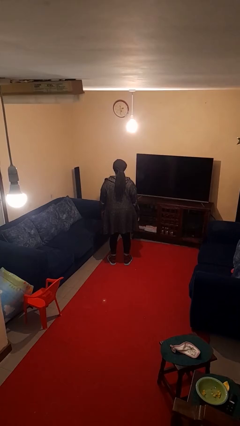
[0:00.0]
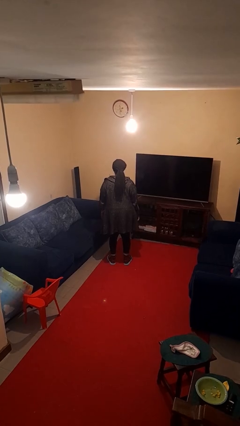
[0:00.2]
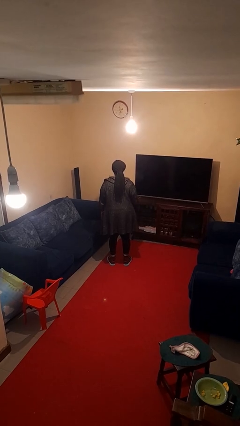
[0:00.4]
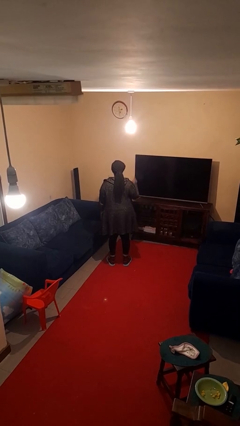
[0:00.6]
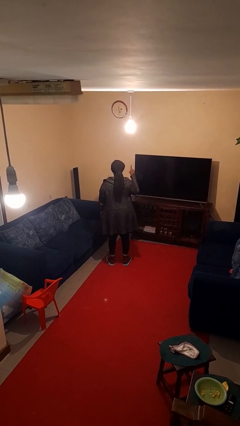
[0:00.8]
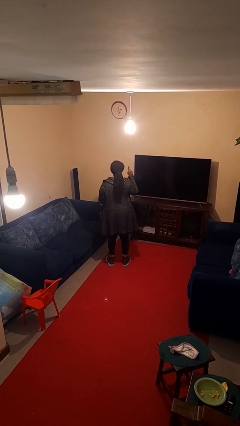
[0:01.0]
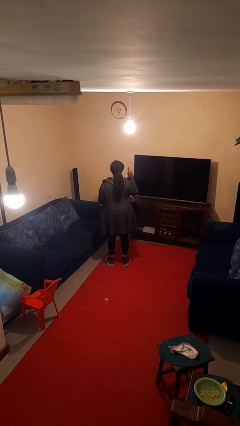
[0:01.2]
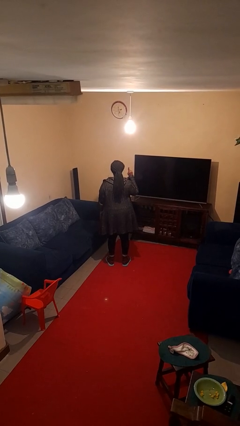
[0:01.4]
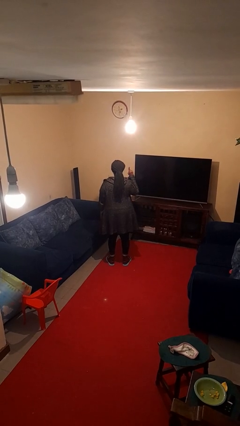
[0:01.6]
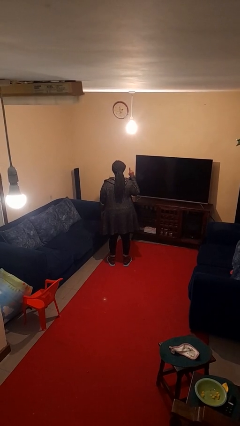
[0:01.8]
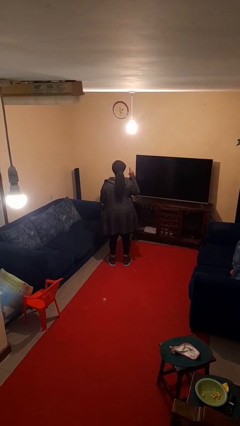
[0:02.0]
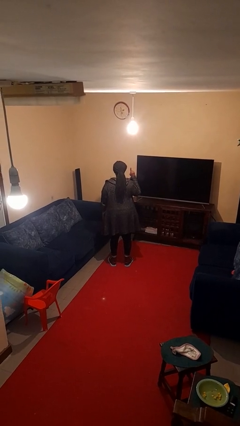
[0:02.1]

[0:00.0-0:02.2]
person gestures number one

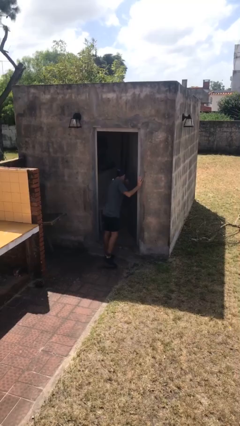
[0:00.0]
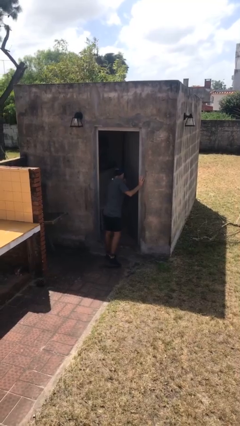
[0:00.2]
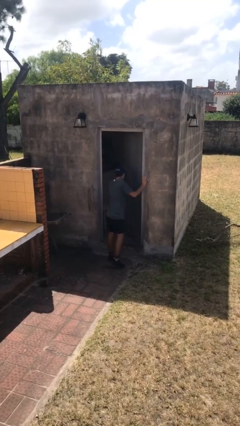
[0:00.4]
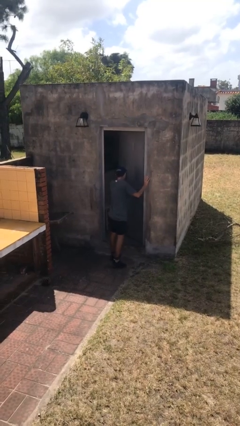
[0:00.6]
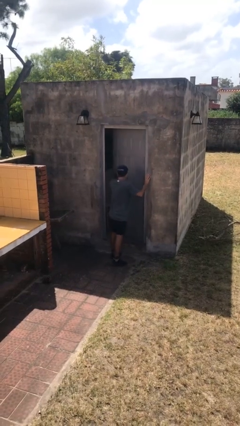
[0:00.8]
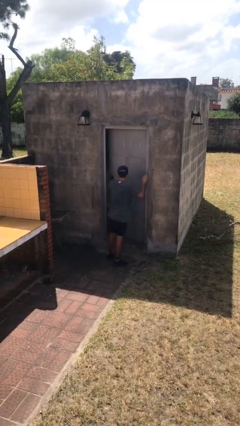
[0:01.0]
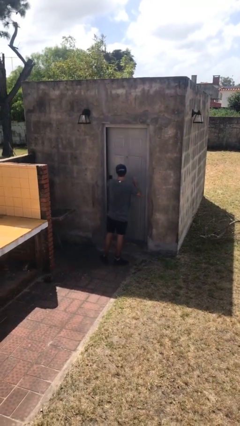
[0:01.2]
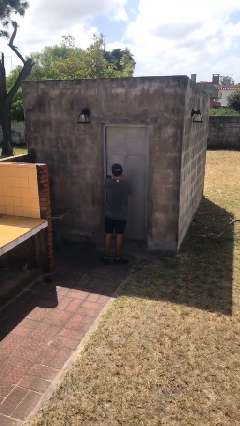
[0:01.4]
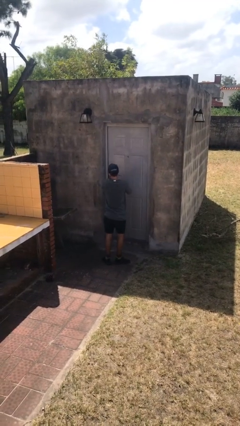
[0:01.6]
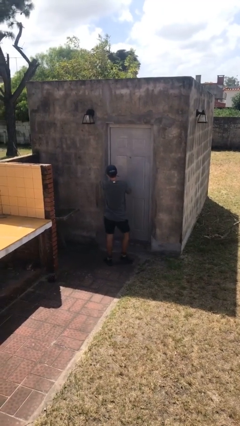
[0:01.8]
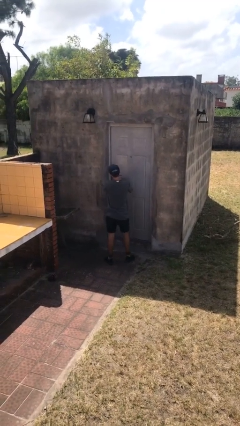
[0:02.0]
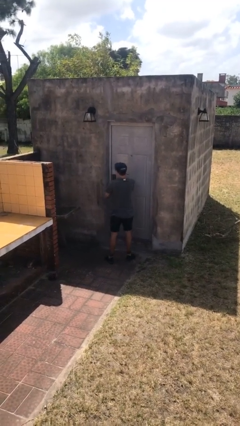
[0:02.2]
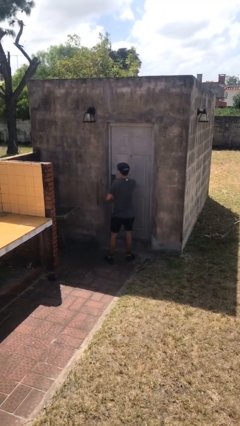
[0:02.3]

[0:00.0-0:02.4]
person closes facility door

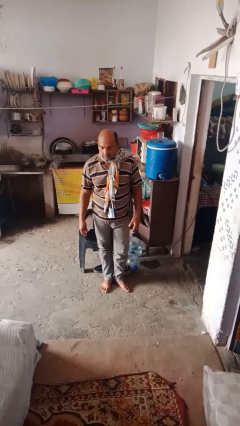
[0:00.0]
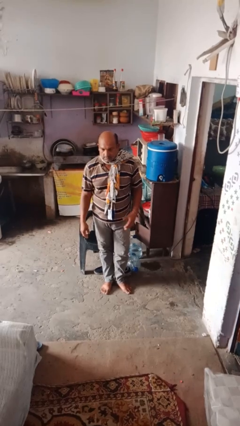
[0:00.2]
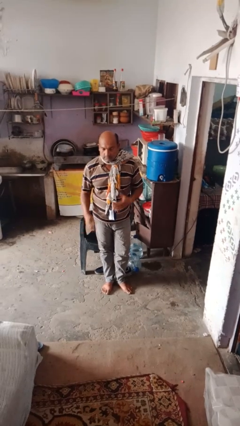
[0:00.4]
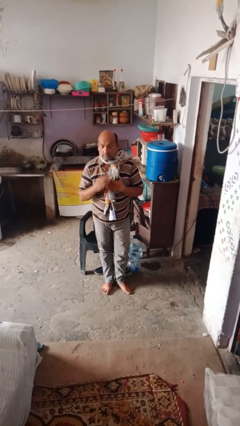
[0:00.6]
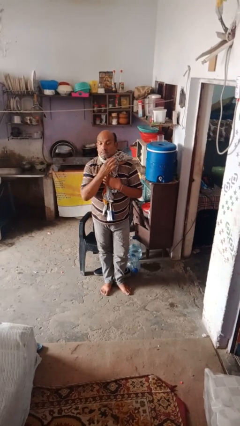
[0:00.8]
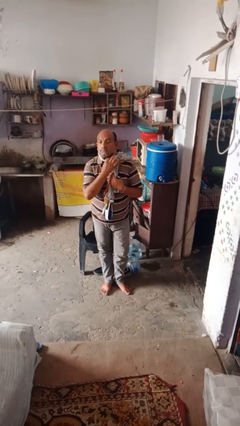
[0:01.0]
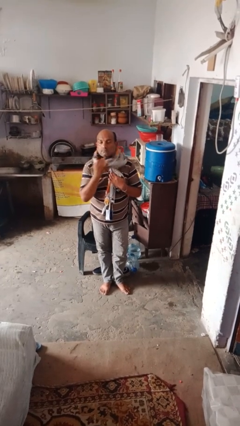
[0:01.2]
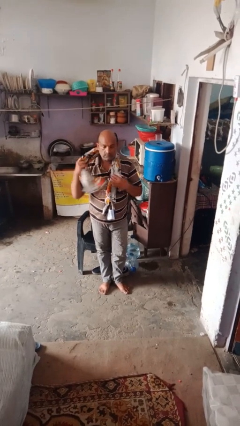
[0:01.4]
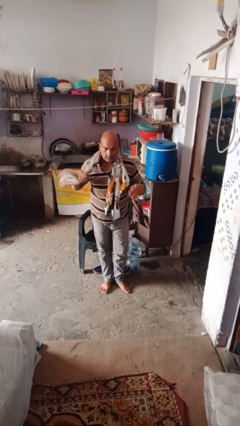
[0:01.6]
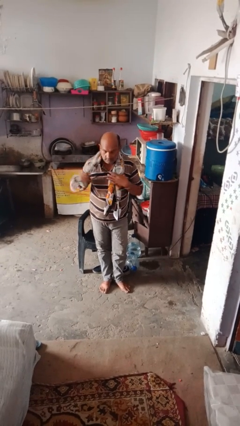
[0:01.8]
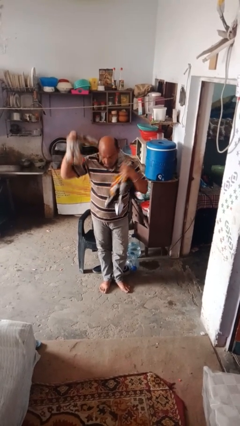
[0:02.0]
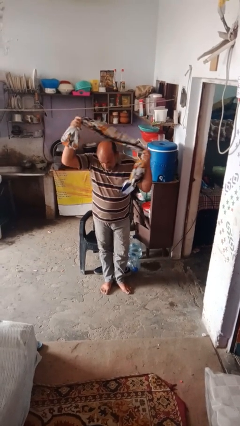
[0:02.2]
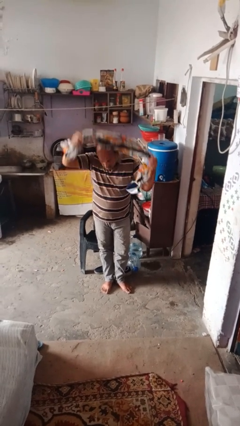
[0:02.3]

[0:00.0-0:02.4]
person takes off scarf

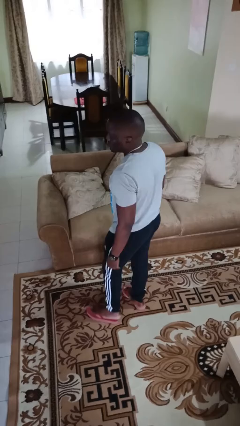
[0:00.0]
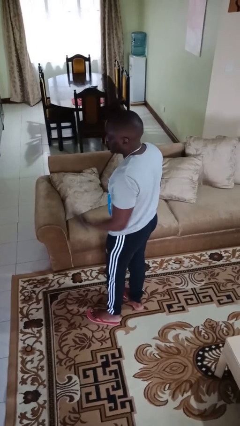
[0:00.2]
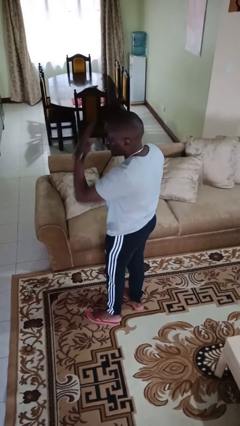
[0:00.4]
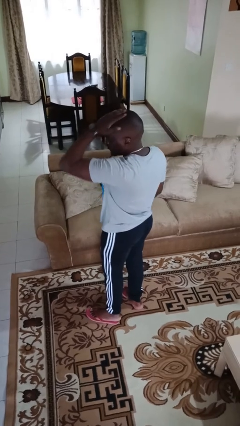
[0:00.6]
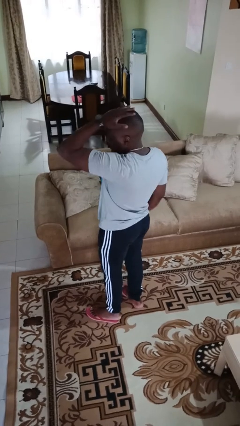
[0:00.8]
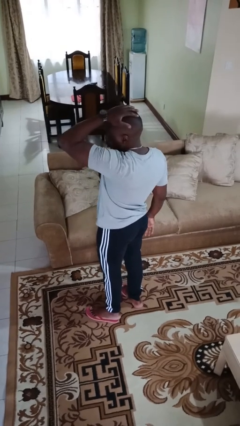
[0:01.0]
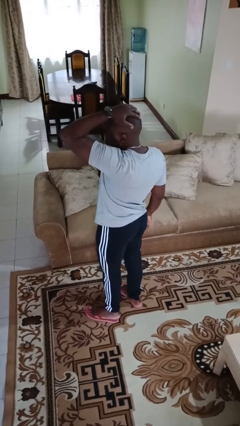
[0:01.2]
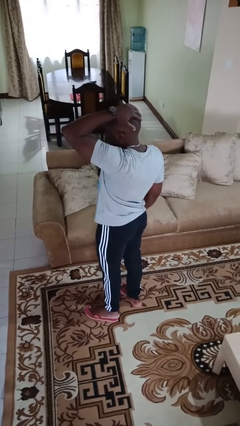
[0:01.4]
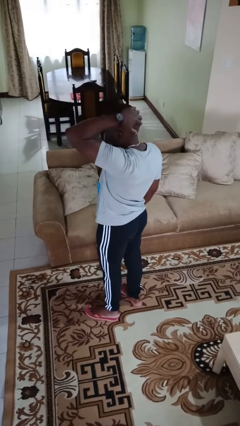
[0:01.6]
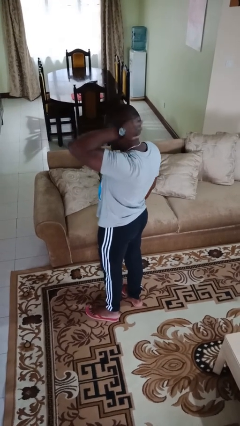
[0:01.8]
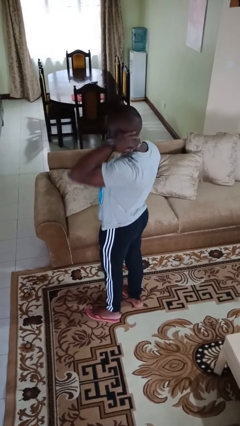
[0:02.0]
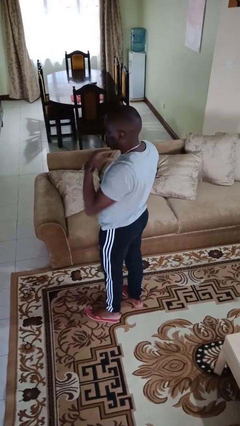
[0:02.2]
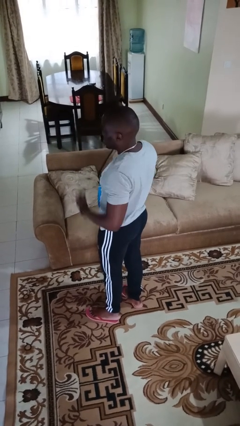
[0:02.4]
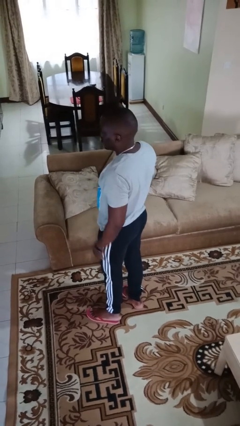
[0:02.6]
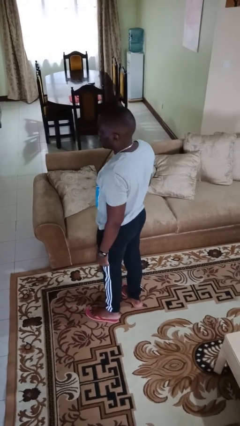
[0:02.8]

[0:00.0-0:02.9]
person strokes hair

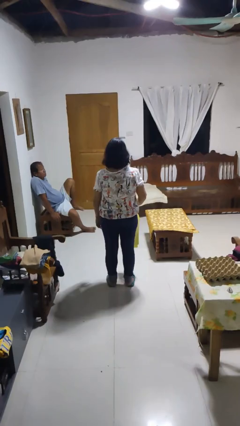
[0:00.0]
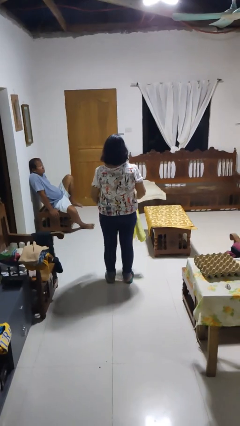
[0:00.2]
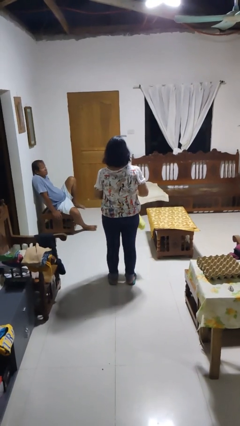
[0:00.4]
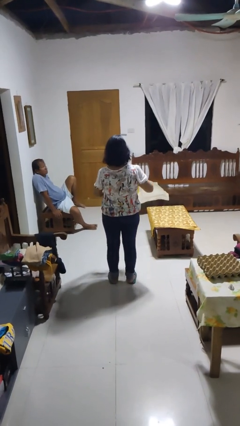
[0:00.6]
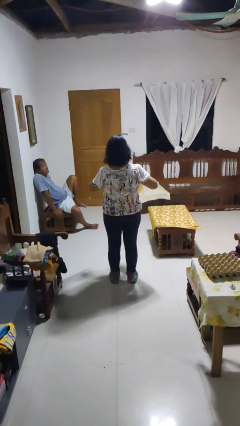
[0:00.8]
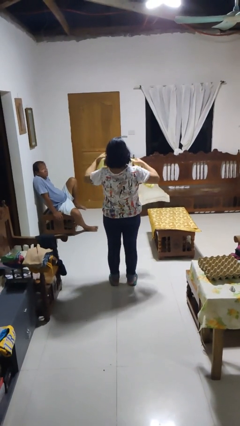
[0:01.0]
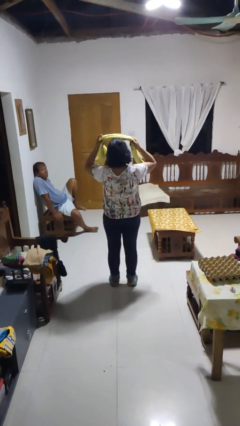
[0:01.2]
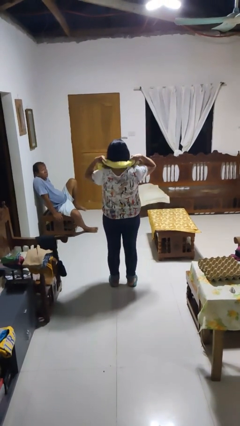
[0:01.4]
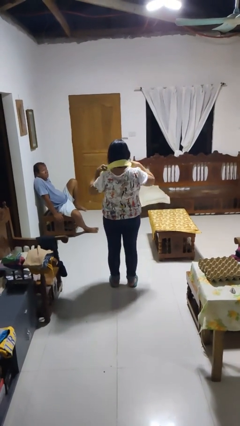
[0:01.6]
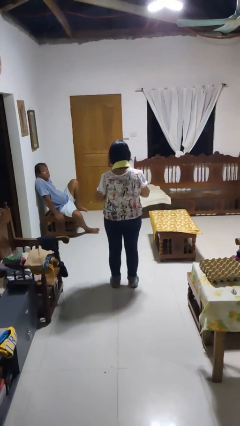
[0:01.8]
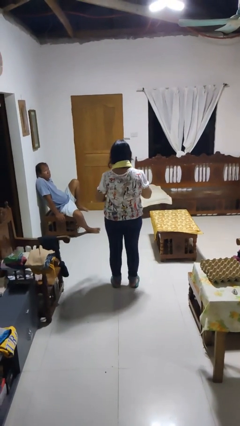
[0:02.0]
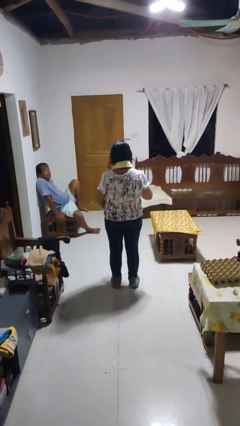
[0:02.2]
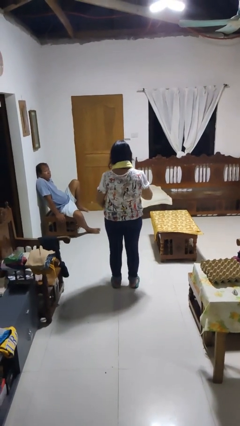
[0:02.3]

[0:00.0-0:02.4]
person puts on scarf

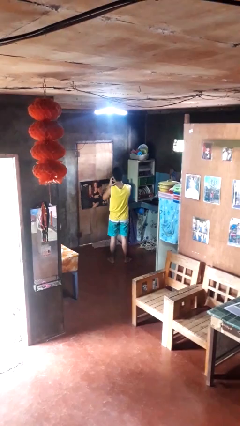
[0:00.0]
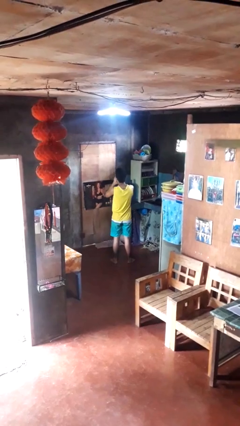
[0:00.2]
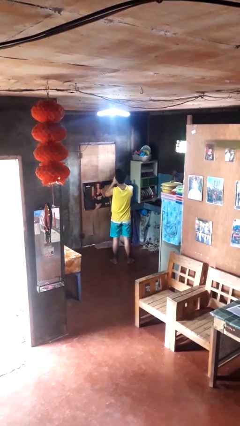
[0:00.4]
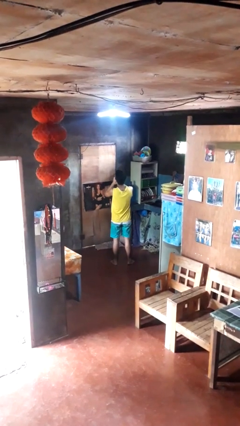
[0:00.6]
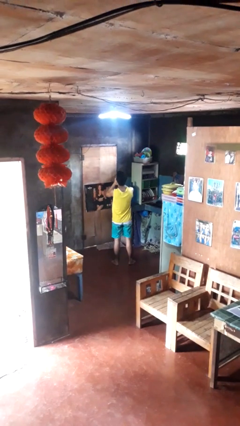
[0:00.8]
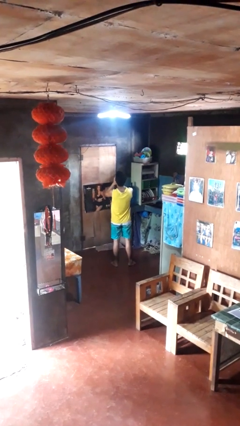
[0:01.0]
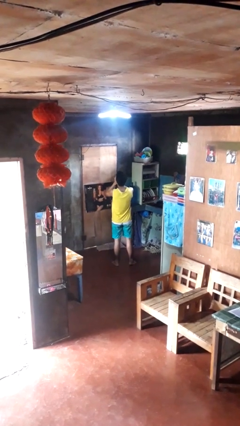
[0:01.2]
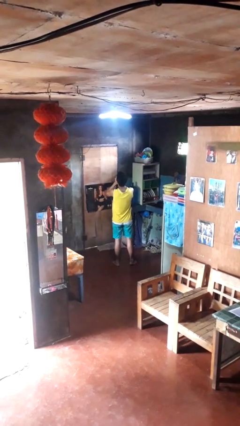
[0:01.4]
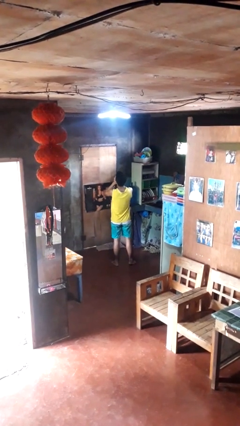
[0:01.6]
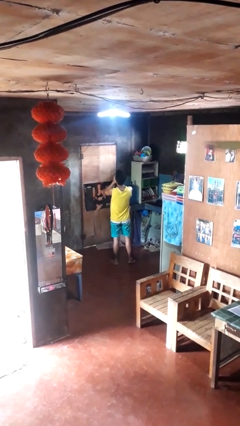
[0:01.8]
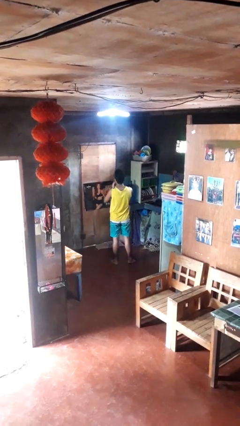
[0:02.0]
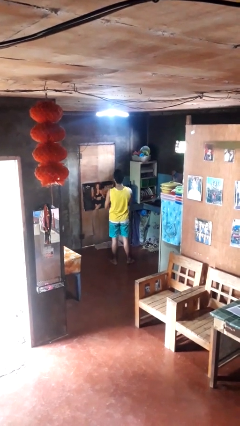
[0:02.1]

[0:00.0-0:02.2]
person yawns

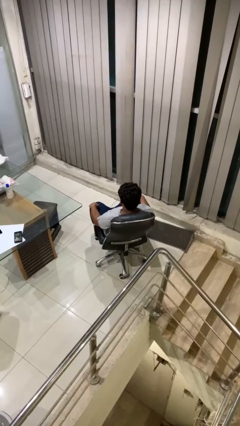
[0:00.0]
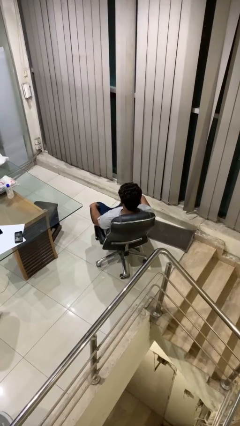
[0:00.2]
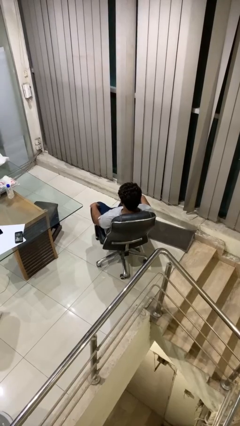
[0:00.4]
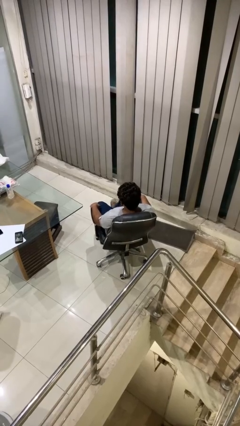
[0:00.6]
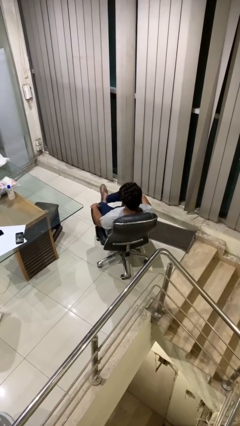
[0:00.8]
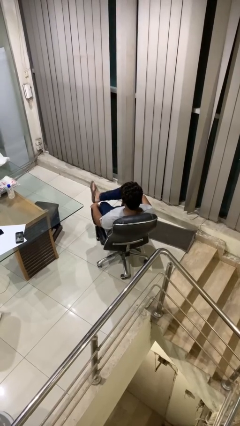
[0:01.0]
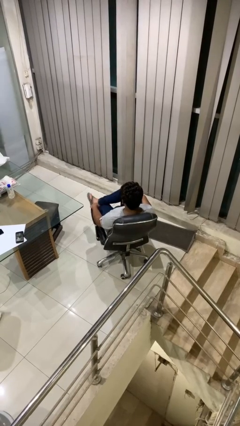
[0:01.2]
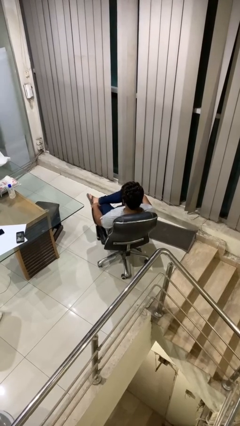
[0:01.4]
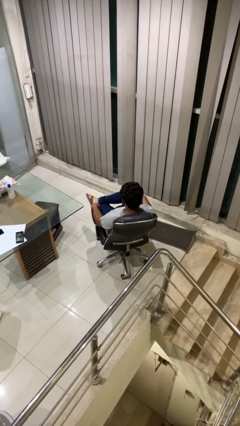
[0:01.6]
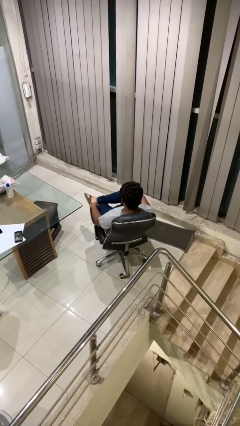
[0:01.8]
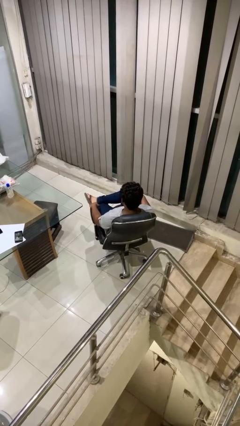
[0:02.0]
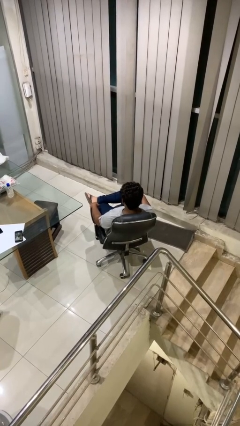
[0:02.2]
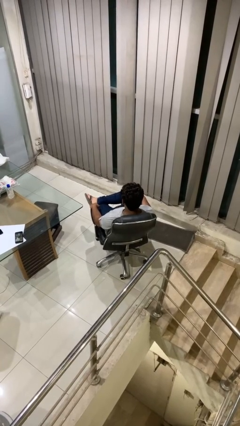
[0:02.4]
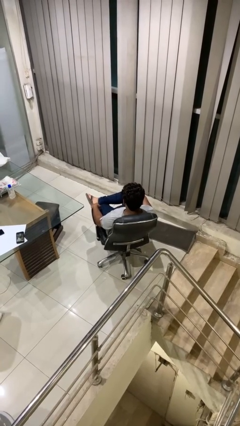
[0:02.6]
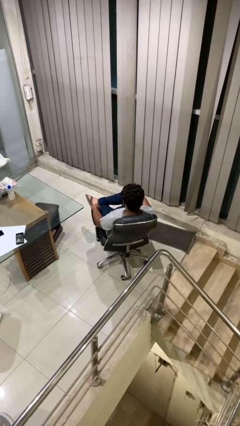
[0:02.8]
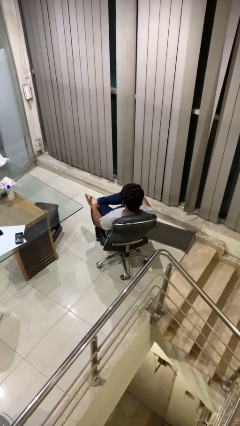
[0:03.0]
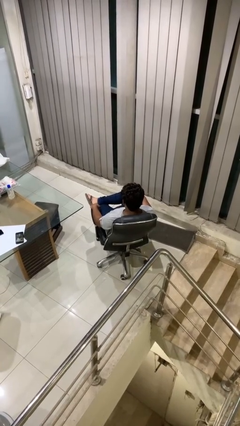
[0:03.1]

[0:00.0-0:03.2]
person crosses legs
